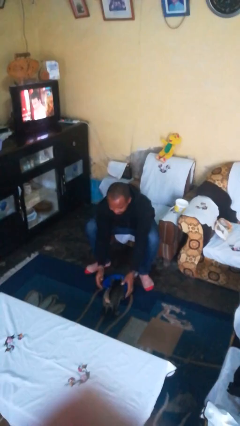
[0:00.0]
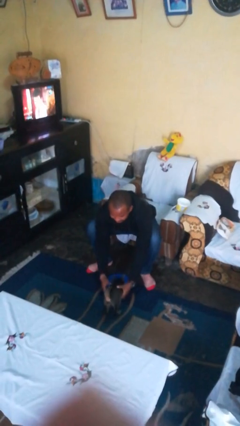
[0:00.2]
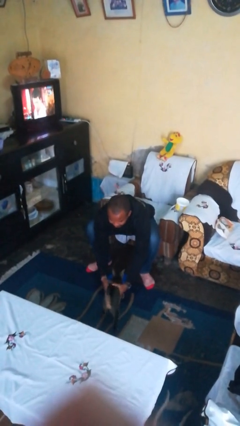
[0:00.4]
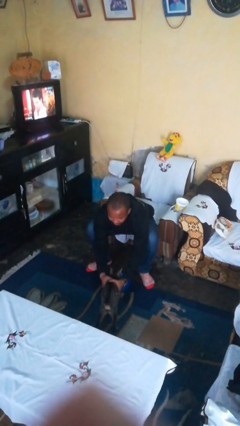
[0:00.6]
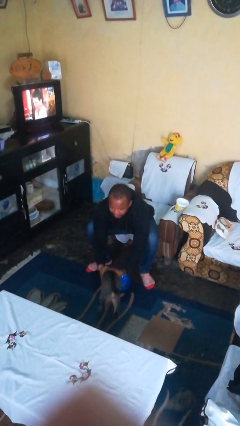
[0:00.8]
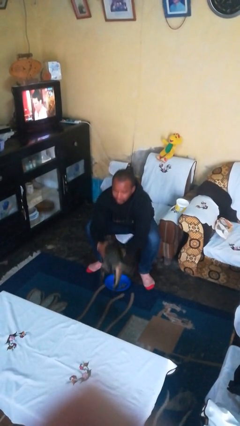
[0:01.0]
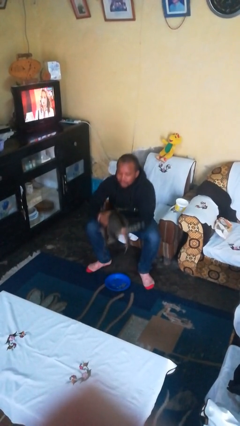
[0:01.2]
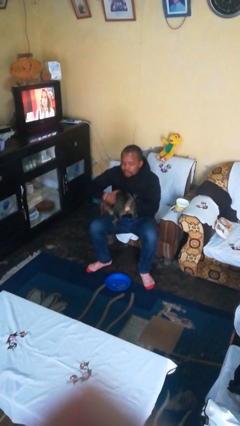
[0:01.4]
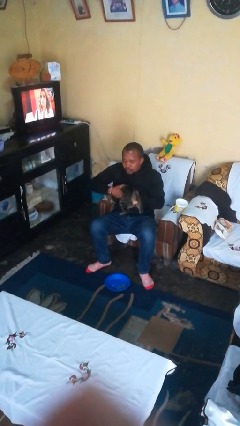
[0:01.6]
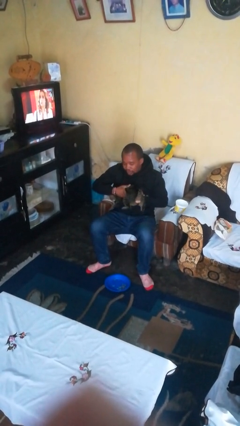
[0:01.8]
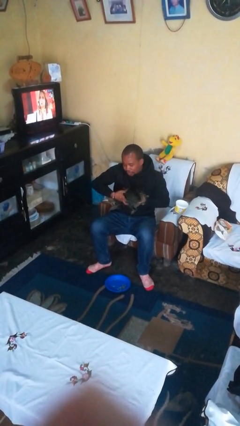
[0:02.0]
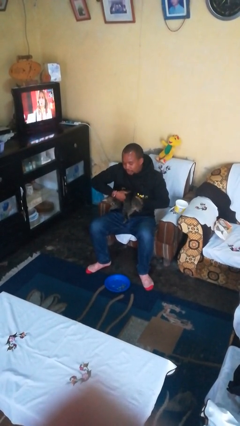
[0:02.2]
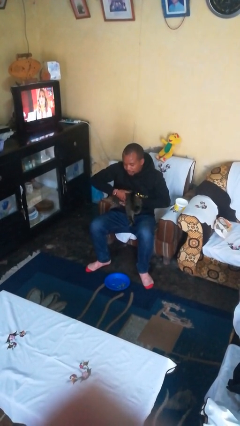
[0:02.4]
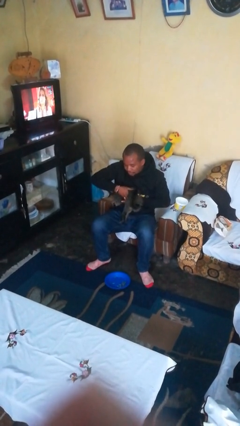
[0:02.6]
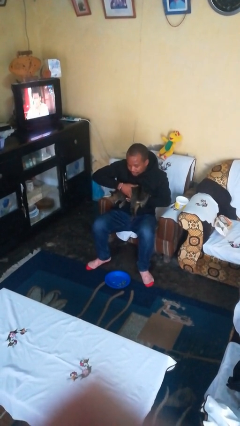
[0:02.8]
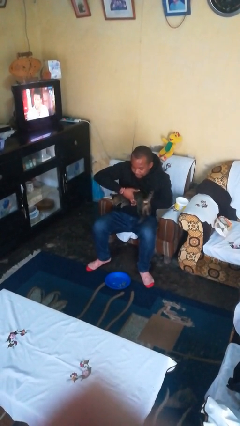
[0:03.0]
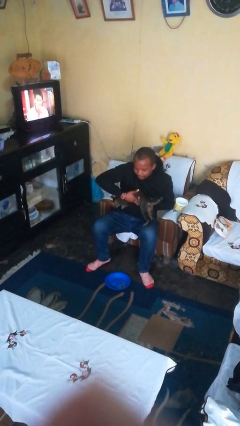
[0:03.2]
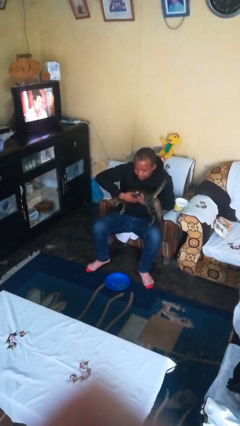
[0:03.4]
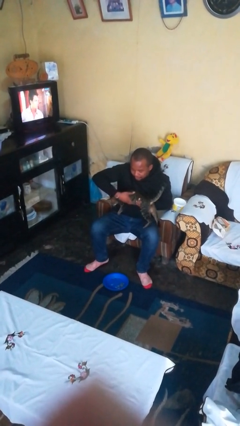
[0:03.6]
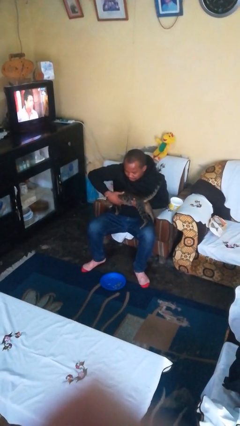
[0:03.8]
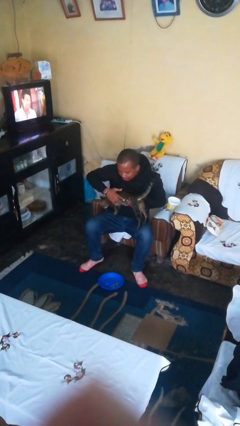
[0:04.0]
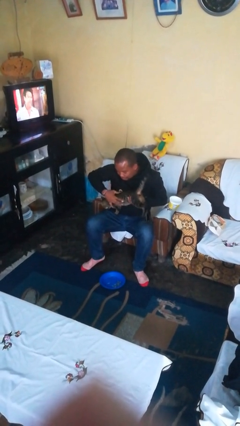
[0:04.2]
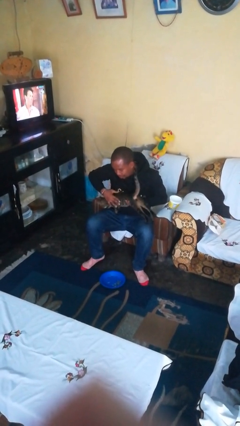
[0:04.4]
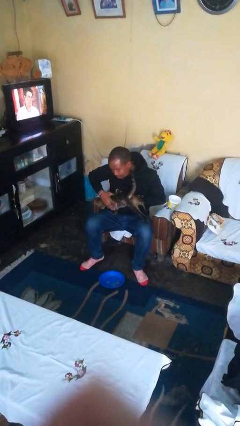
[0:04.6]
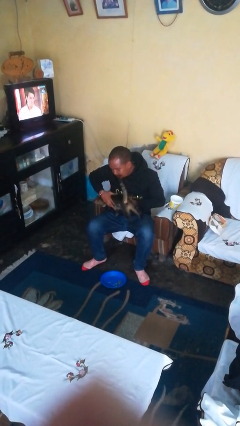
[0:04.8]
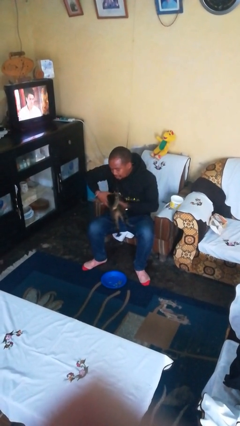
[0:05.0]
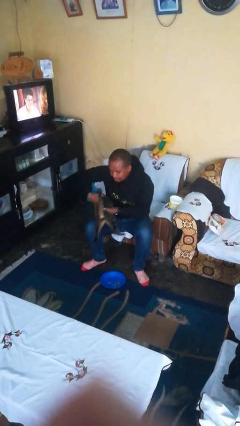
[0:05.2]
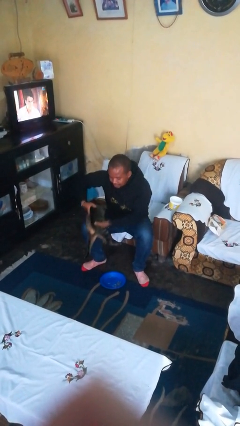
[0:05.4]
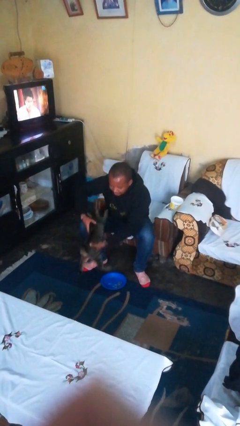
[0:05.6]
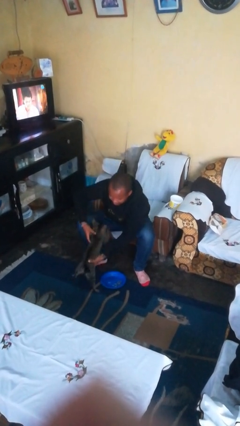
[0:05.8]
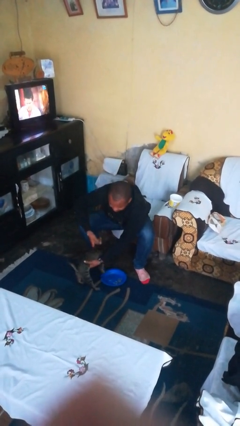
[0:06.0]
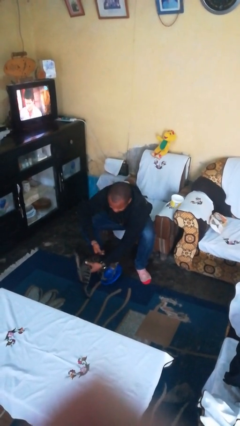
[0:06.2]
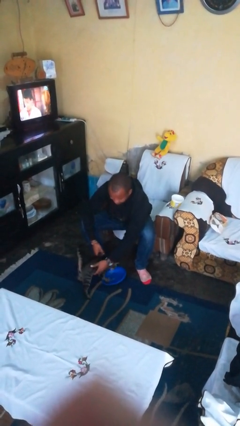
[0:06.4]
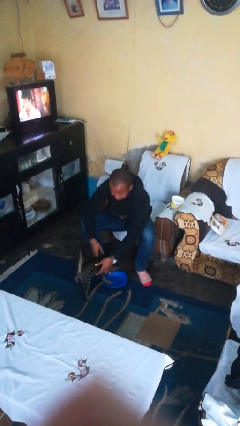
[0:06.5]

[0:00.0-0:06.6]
person hugs cat

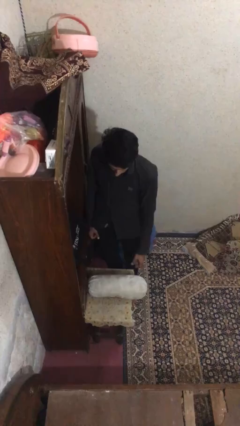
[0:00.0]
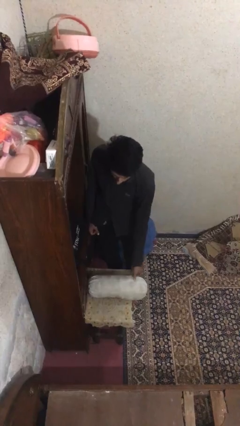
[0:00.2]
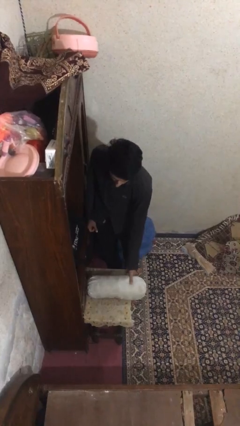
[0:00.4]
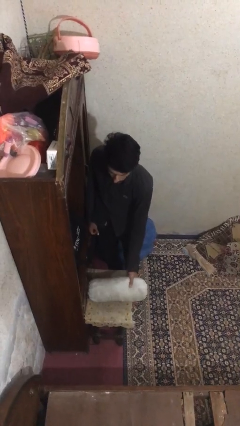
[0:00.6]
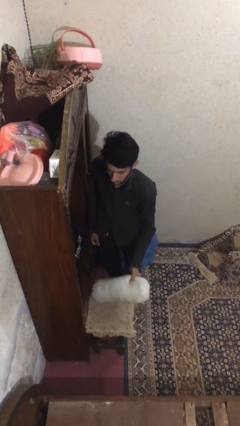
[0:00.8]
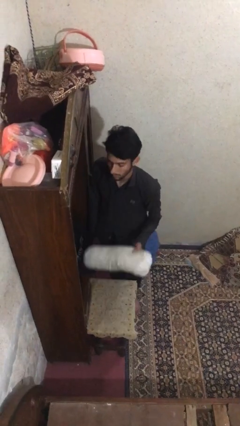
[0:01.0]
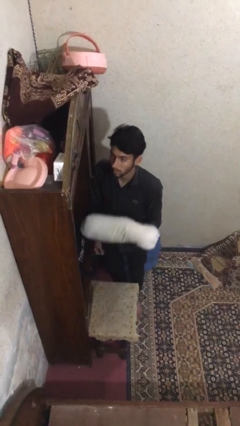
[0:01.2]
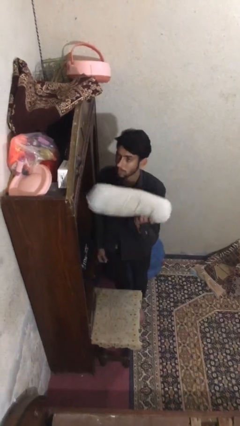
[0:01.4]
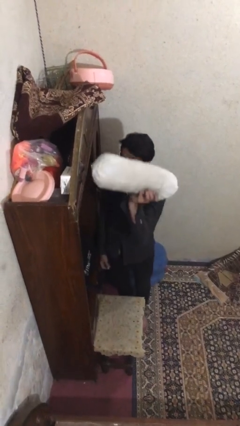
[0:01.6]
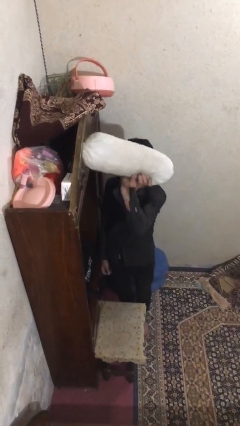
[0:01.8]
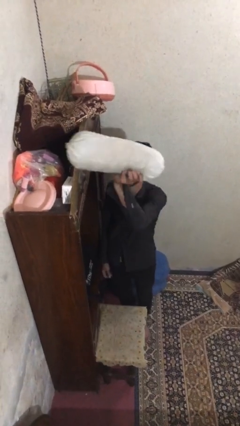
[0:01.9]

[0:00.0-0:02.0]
person picks up object from table

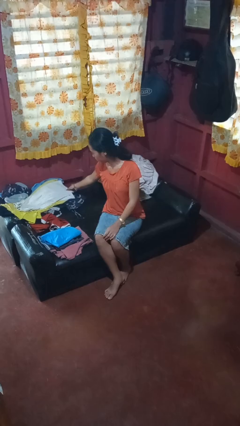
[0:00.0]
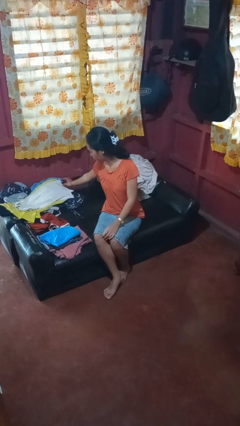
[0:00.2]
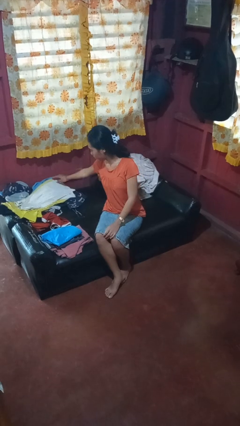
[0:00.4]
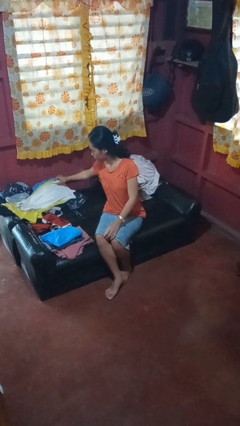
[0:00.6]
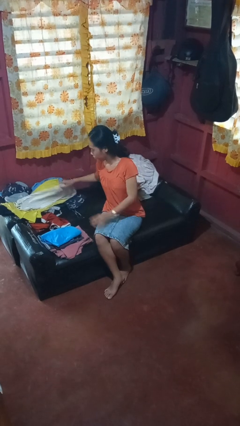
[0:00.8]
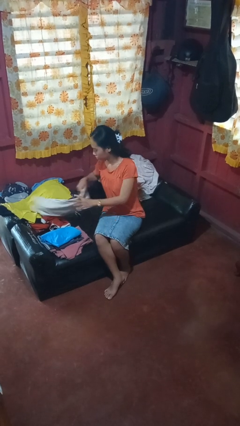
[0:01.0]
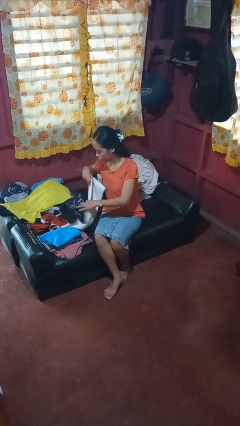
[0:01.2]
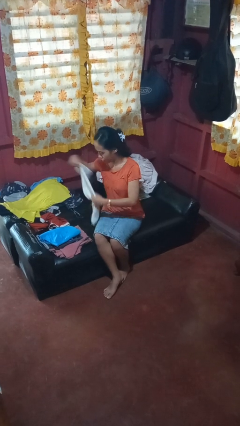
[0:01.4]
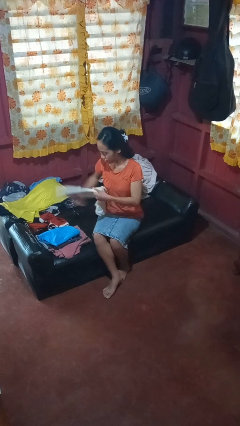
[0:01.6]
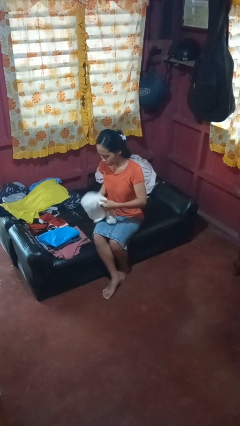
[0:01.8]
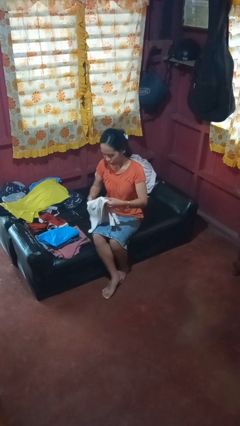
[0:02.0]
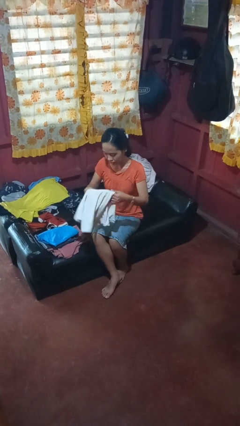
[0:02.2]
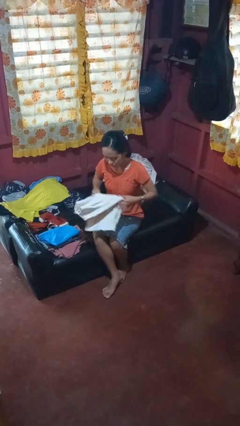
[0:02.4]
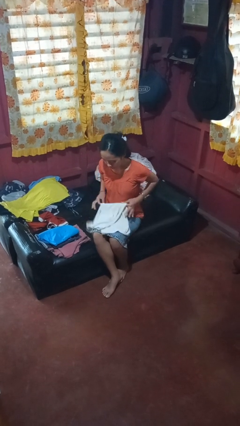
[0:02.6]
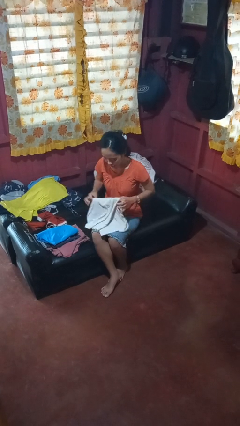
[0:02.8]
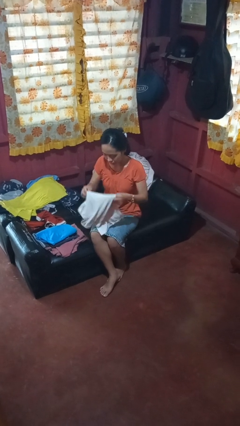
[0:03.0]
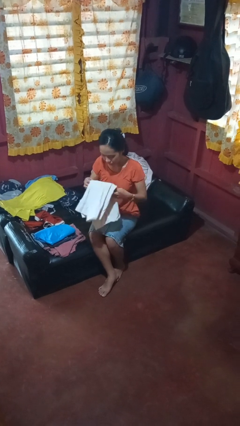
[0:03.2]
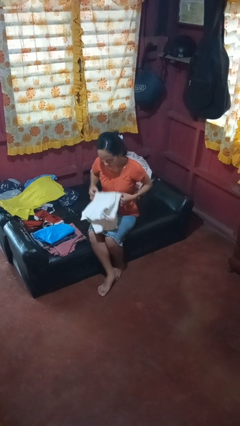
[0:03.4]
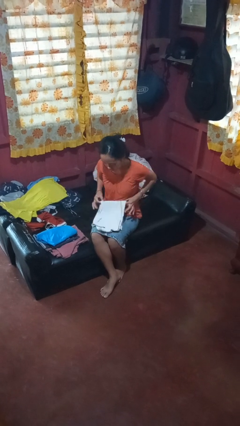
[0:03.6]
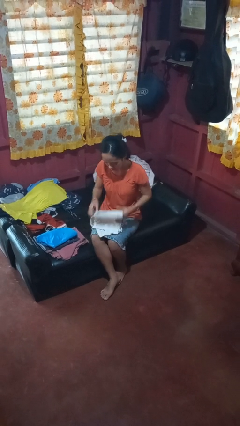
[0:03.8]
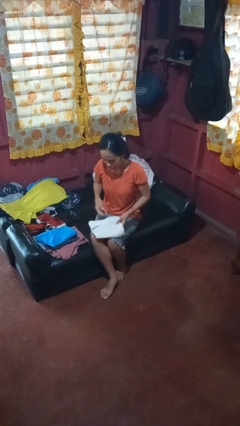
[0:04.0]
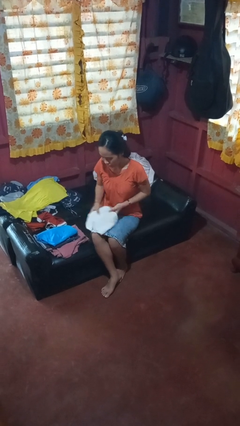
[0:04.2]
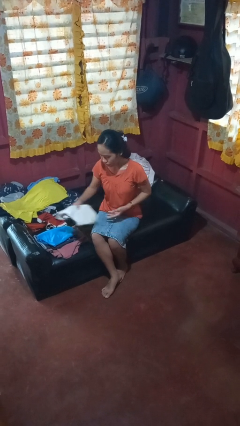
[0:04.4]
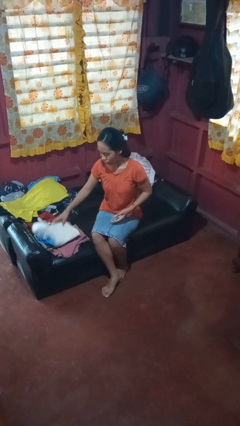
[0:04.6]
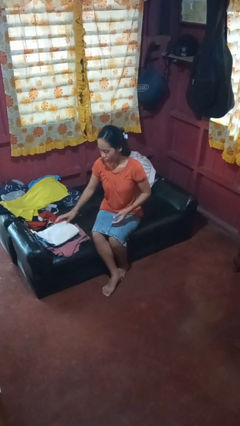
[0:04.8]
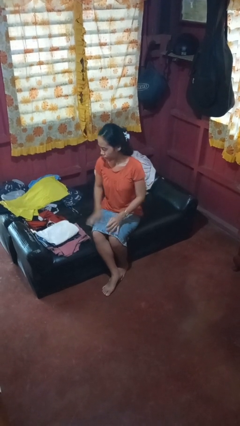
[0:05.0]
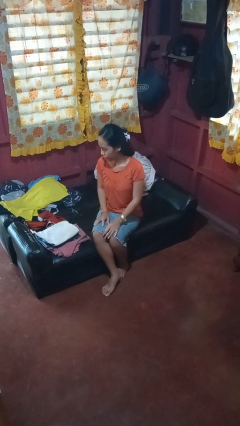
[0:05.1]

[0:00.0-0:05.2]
person folds shirt

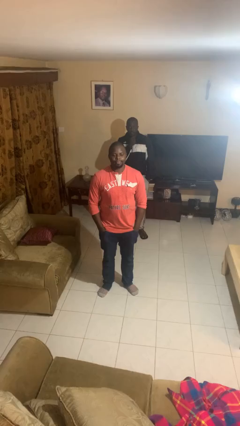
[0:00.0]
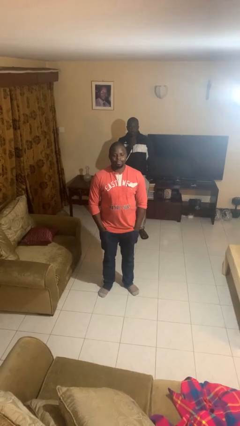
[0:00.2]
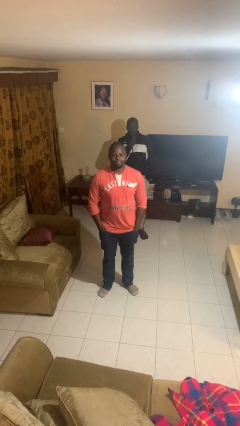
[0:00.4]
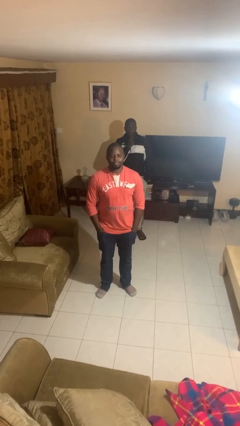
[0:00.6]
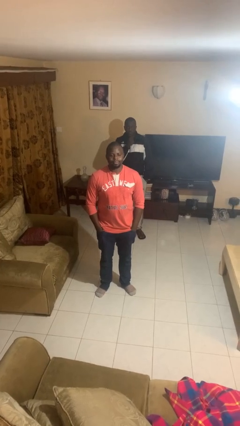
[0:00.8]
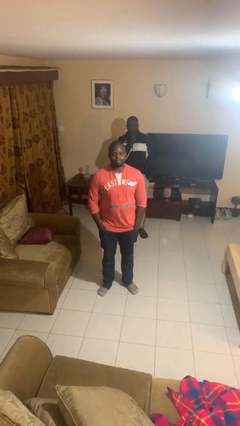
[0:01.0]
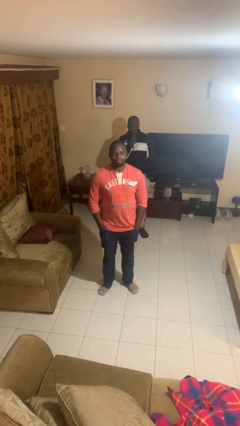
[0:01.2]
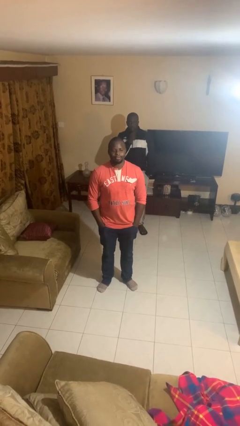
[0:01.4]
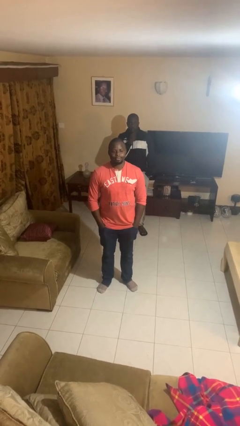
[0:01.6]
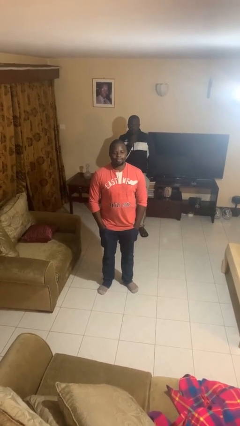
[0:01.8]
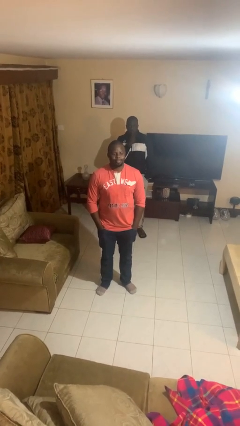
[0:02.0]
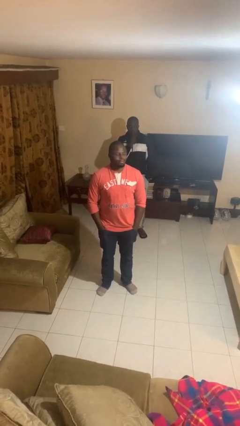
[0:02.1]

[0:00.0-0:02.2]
person looks over shoulder

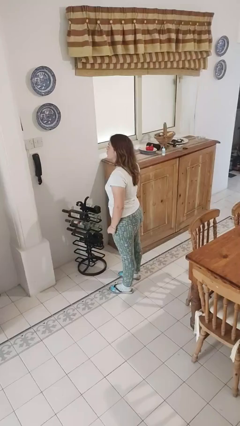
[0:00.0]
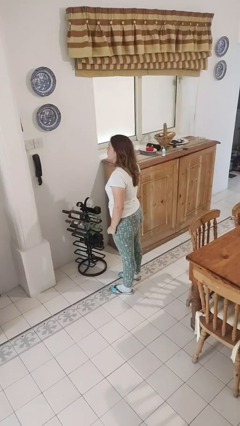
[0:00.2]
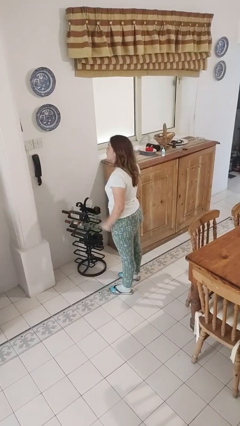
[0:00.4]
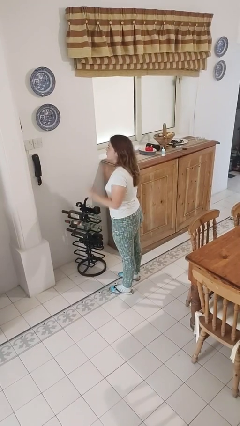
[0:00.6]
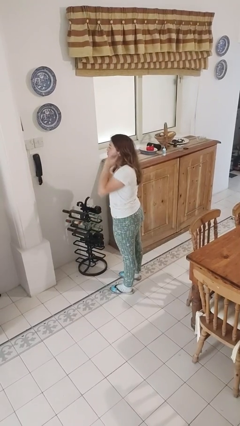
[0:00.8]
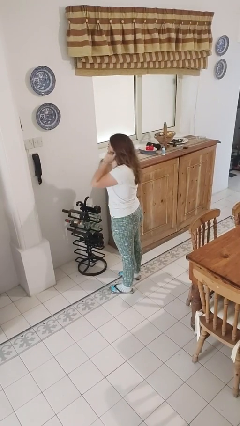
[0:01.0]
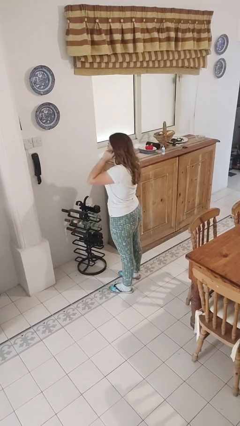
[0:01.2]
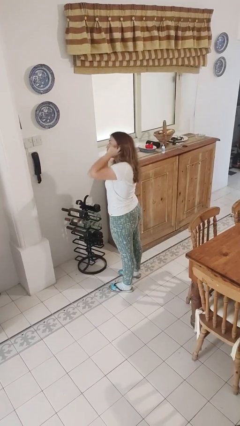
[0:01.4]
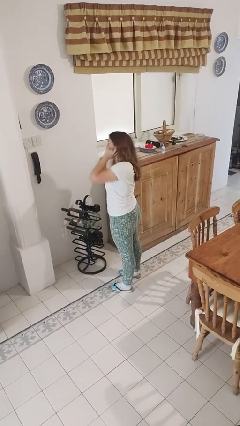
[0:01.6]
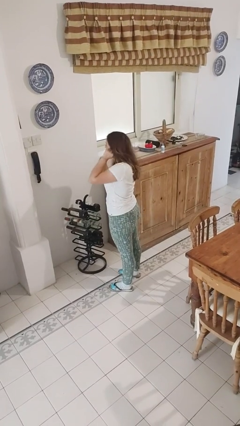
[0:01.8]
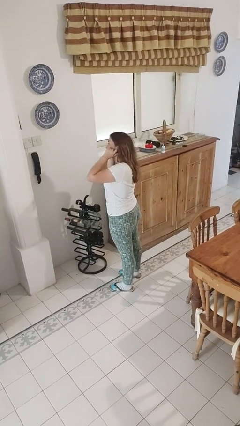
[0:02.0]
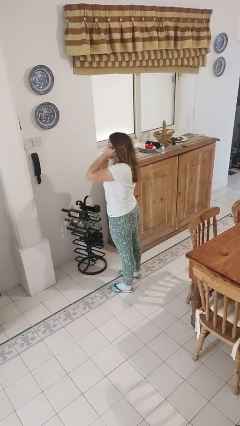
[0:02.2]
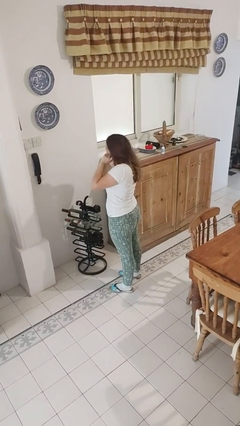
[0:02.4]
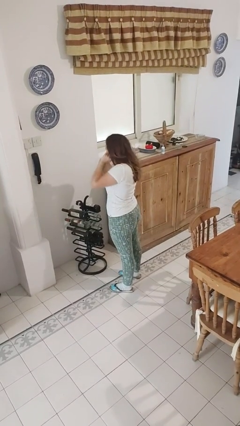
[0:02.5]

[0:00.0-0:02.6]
person puts fingers in ear
